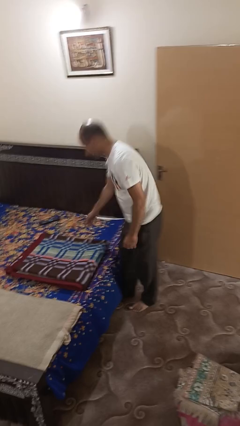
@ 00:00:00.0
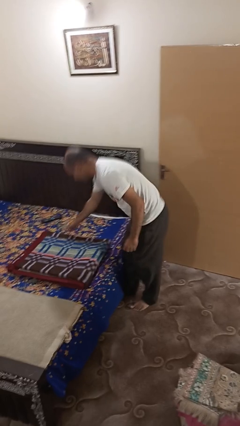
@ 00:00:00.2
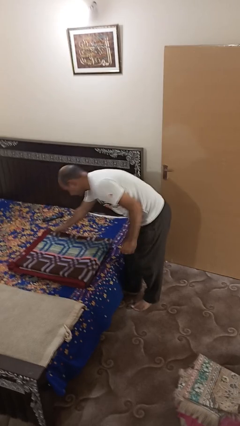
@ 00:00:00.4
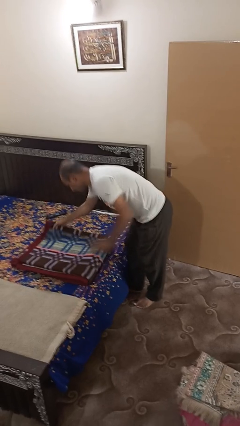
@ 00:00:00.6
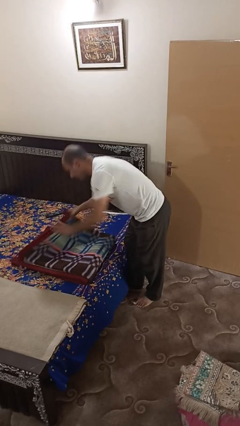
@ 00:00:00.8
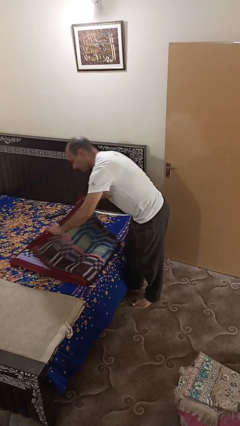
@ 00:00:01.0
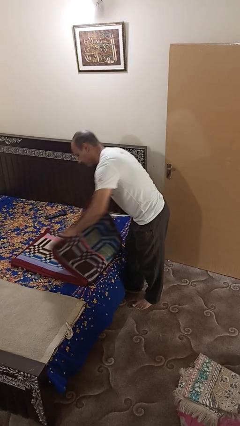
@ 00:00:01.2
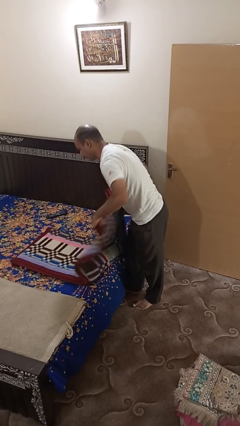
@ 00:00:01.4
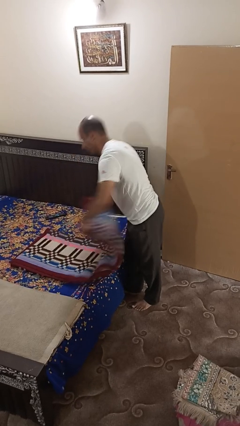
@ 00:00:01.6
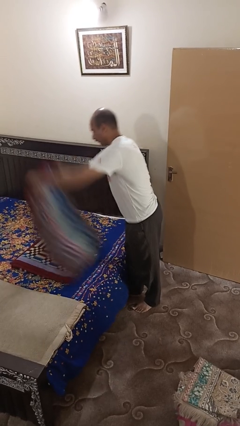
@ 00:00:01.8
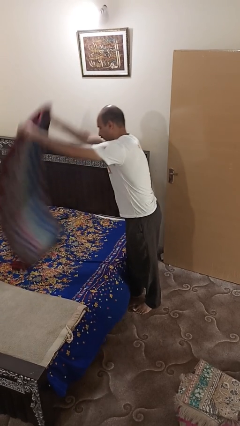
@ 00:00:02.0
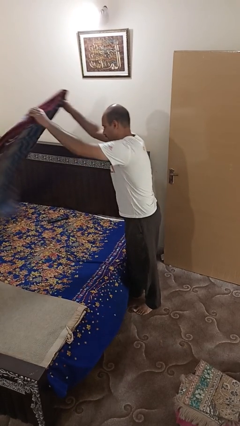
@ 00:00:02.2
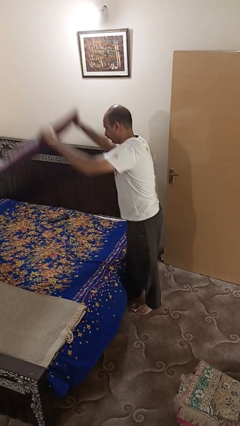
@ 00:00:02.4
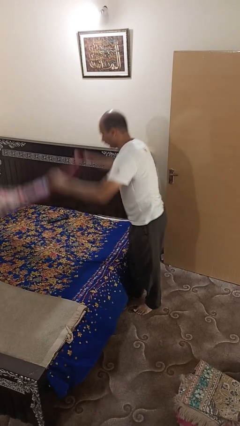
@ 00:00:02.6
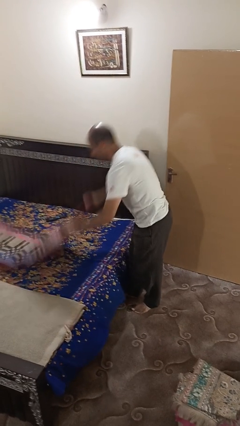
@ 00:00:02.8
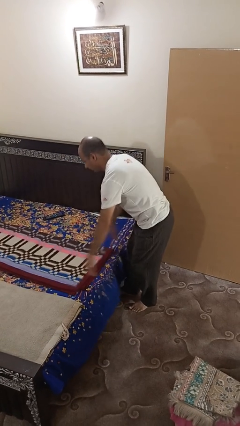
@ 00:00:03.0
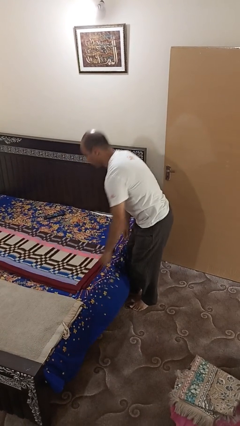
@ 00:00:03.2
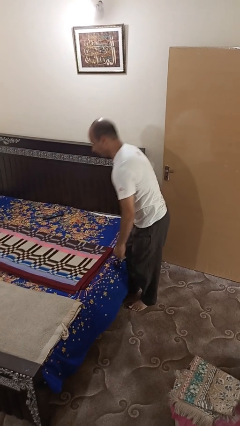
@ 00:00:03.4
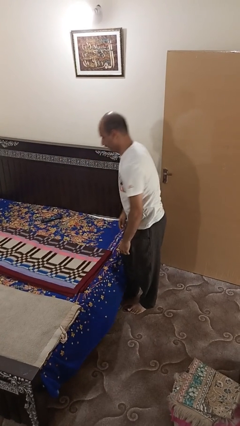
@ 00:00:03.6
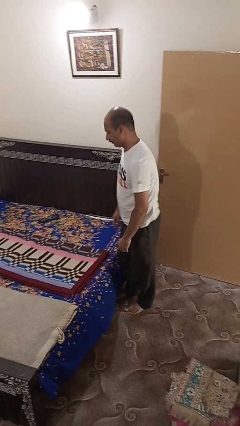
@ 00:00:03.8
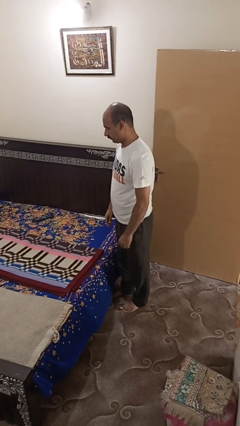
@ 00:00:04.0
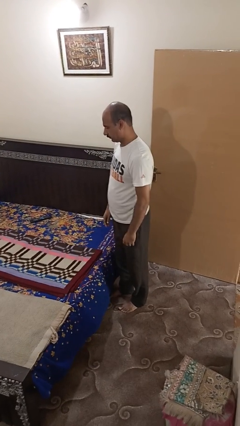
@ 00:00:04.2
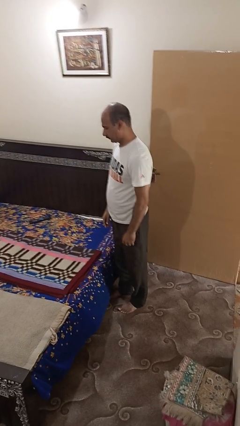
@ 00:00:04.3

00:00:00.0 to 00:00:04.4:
person unfolds blanket

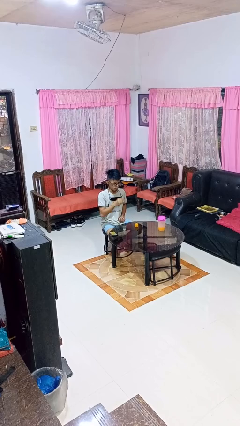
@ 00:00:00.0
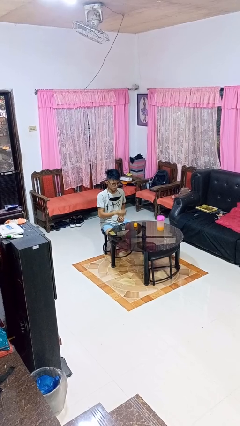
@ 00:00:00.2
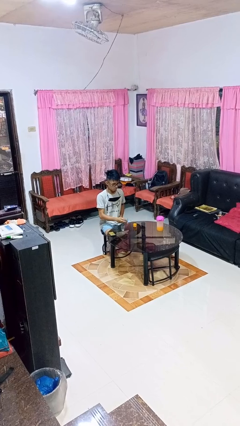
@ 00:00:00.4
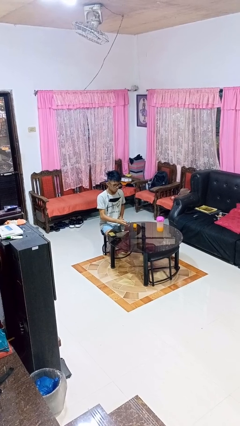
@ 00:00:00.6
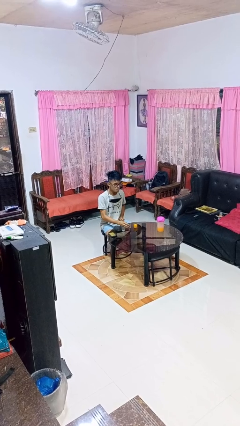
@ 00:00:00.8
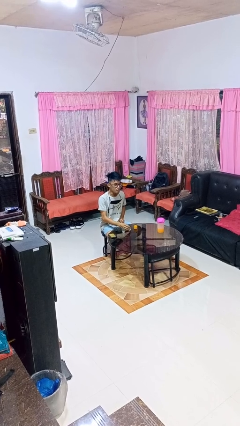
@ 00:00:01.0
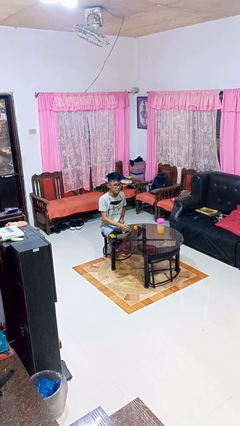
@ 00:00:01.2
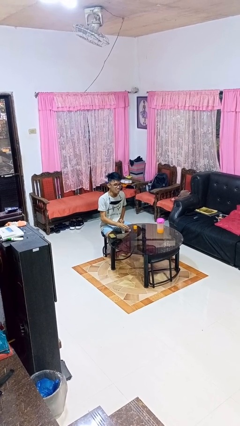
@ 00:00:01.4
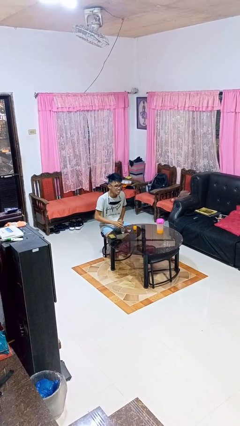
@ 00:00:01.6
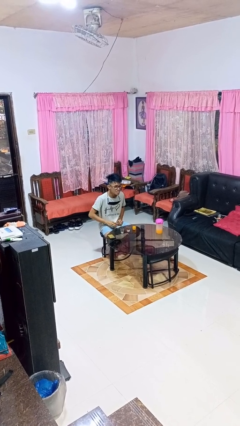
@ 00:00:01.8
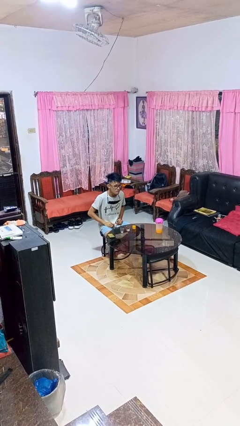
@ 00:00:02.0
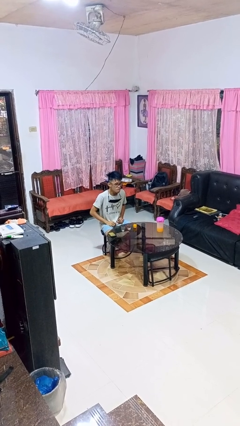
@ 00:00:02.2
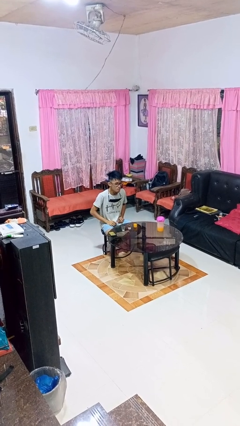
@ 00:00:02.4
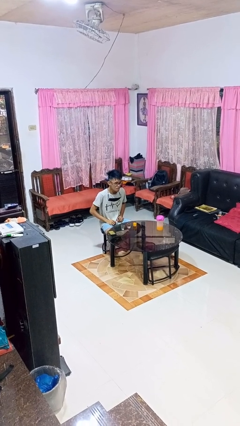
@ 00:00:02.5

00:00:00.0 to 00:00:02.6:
person puts down object on table

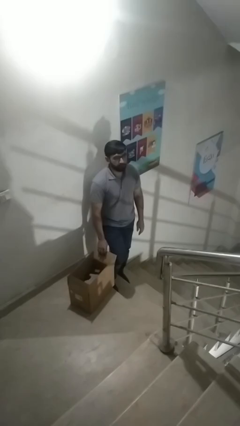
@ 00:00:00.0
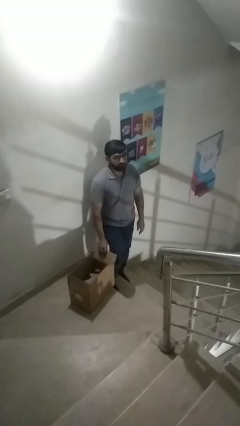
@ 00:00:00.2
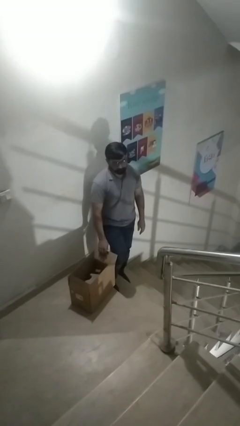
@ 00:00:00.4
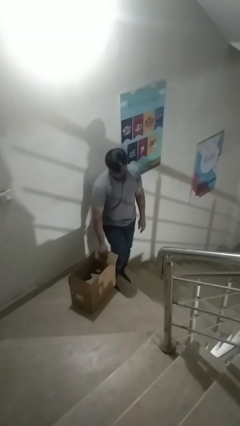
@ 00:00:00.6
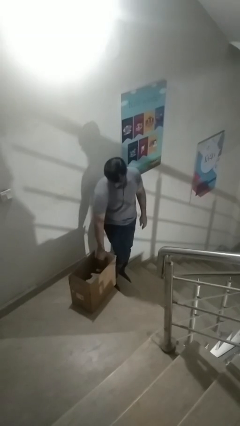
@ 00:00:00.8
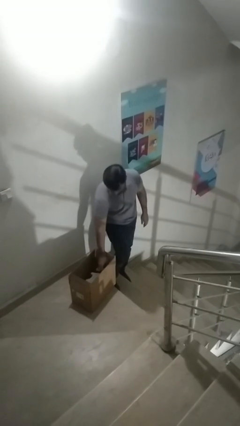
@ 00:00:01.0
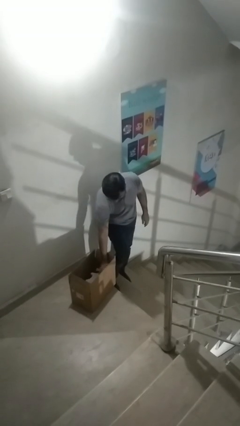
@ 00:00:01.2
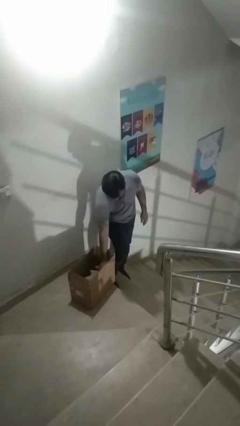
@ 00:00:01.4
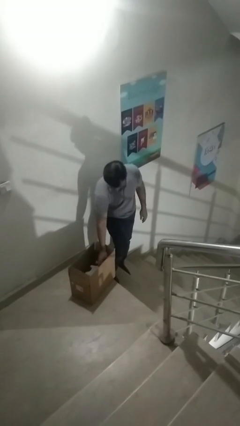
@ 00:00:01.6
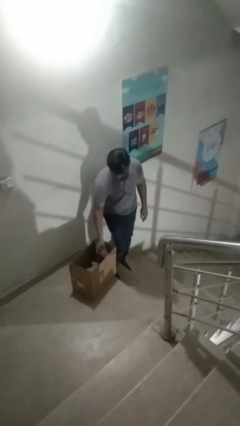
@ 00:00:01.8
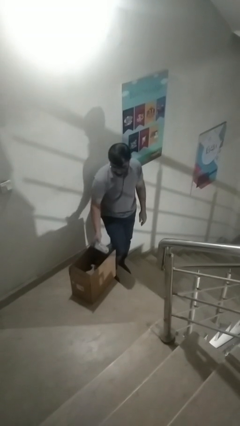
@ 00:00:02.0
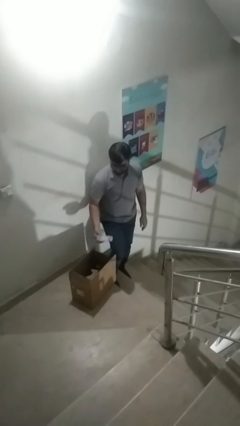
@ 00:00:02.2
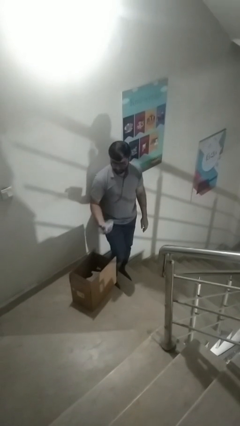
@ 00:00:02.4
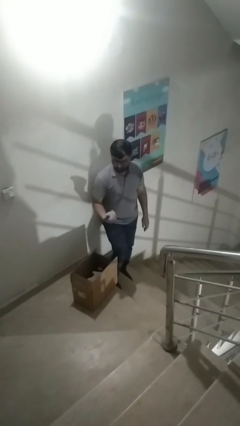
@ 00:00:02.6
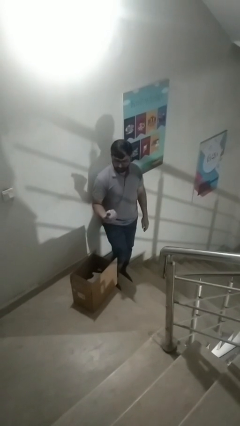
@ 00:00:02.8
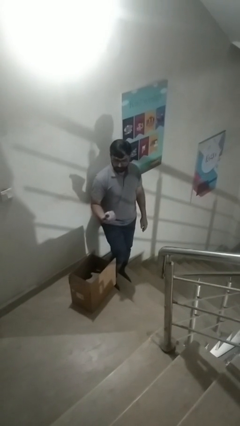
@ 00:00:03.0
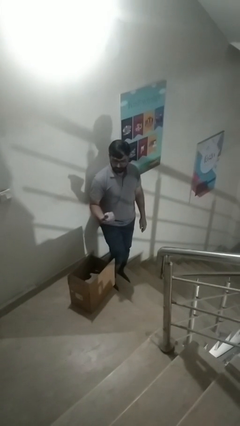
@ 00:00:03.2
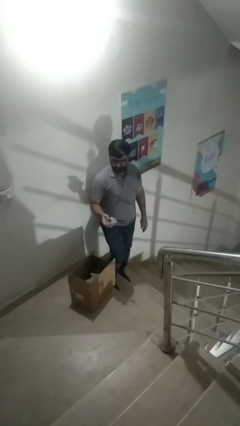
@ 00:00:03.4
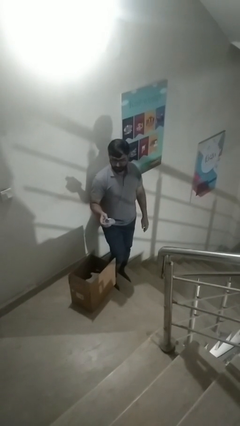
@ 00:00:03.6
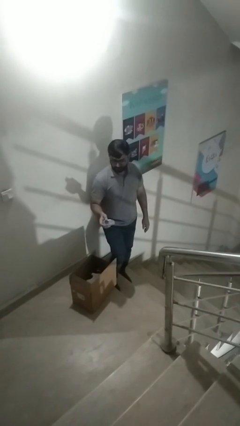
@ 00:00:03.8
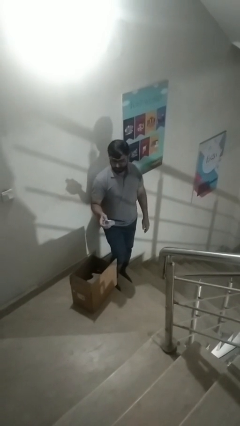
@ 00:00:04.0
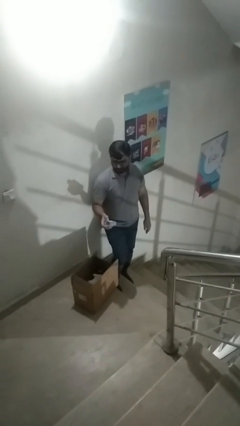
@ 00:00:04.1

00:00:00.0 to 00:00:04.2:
person takes object from box

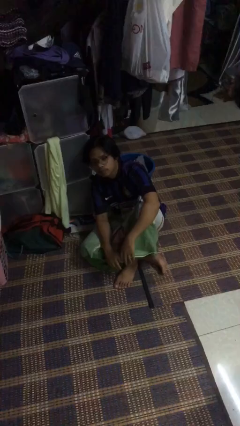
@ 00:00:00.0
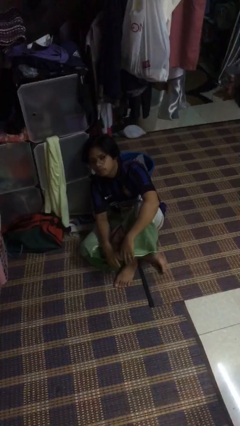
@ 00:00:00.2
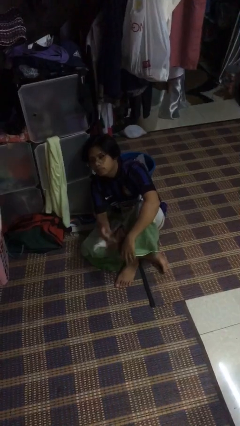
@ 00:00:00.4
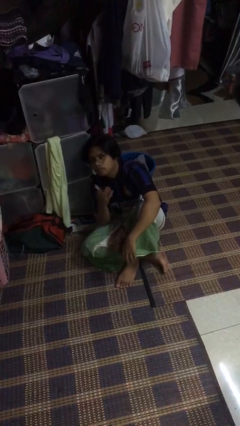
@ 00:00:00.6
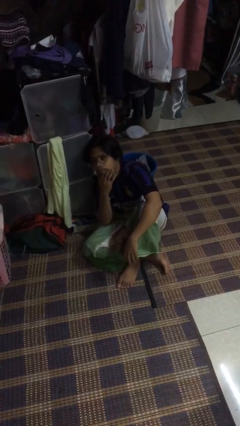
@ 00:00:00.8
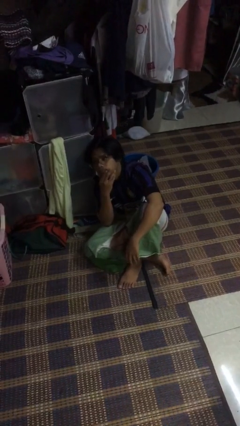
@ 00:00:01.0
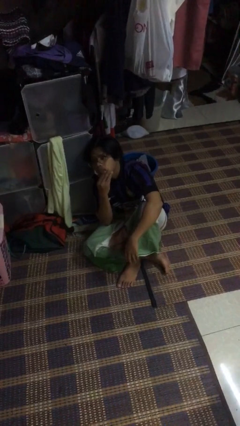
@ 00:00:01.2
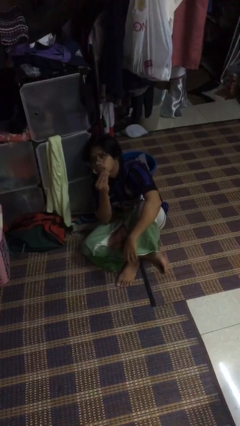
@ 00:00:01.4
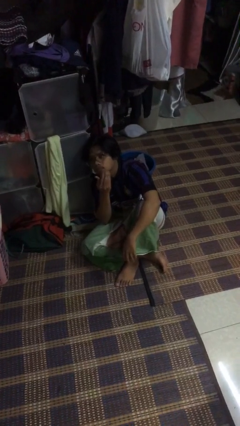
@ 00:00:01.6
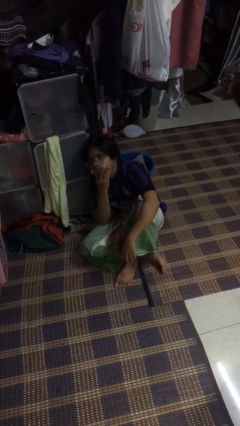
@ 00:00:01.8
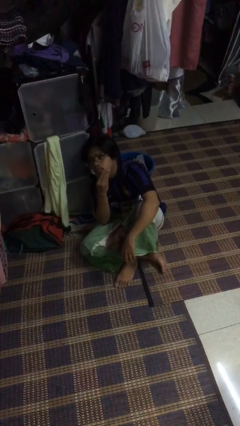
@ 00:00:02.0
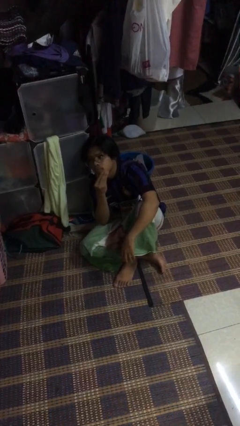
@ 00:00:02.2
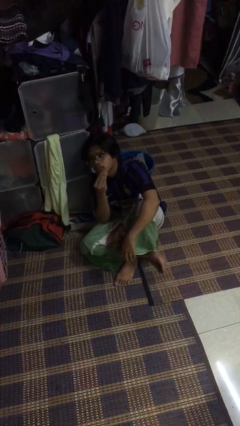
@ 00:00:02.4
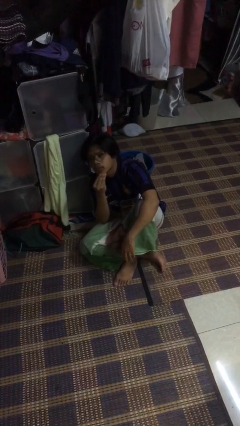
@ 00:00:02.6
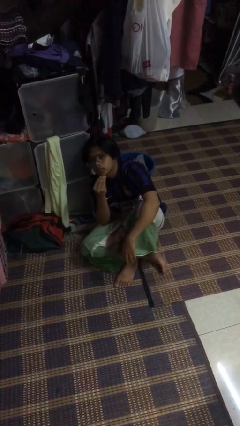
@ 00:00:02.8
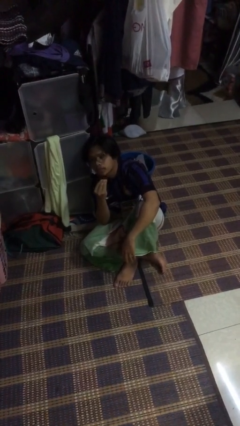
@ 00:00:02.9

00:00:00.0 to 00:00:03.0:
person strokes chin

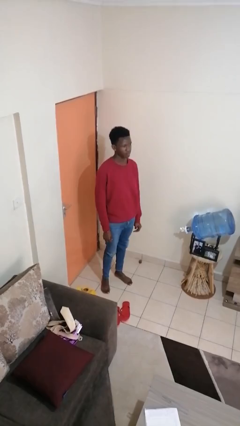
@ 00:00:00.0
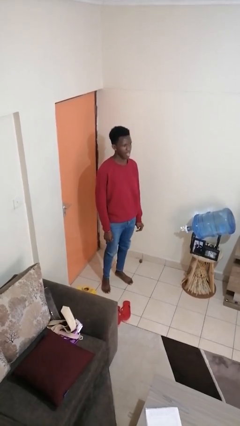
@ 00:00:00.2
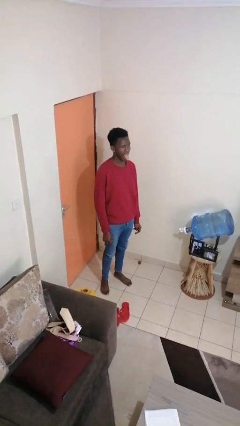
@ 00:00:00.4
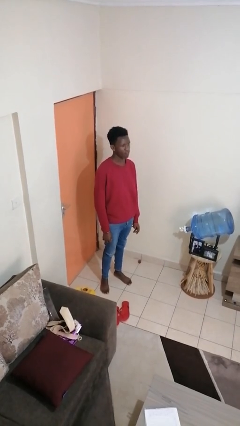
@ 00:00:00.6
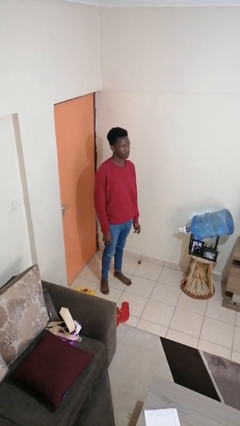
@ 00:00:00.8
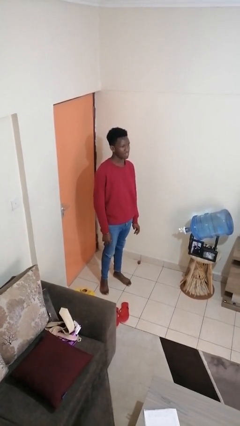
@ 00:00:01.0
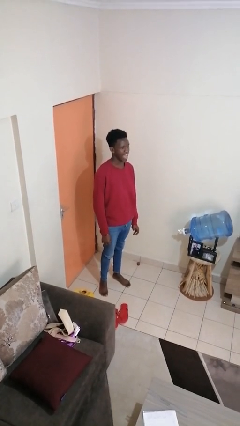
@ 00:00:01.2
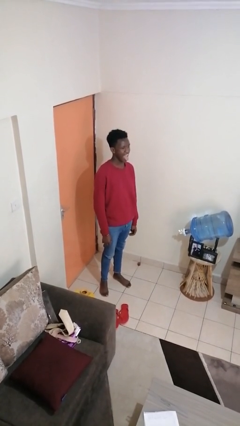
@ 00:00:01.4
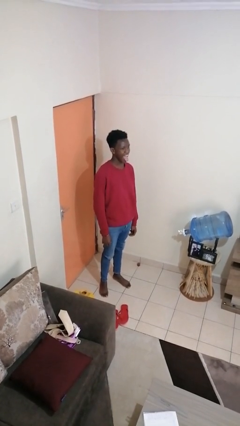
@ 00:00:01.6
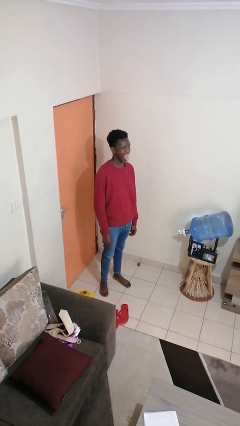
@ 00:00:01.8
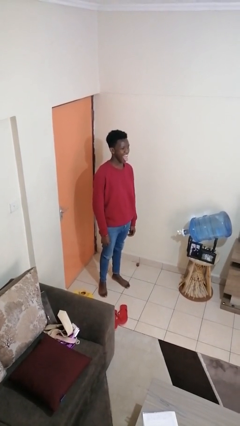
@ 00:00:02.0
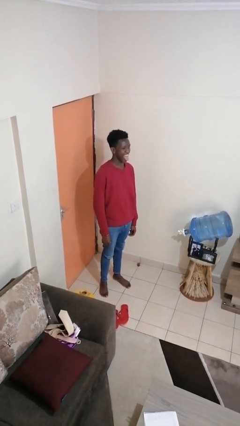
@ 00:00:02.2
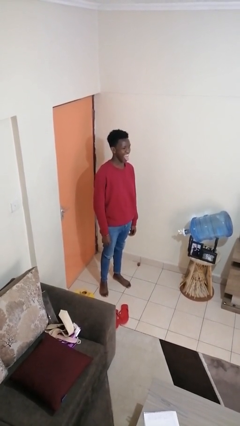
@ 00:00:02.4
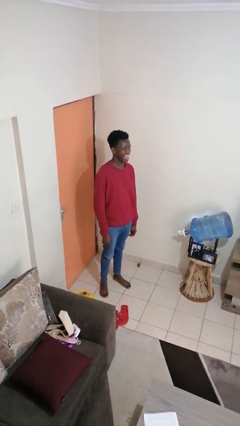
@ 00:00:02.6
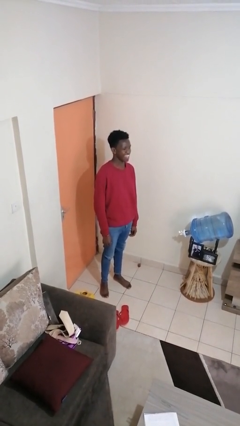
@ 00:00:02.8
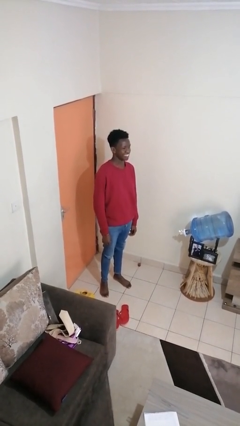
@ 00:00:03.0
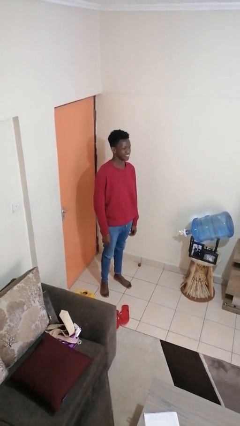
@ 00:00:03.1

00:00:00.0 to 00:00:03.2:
person sticks out tongue
